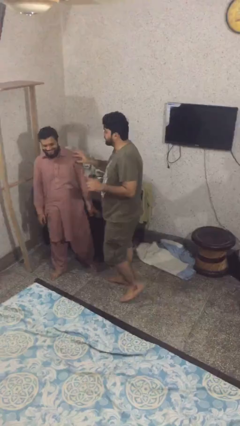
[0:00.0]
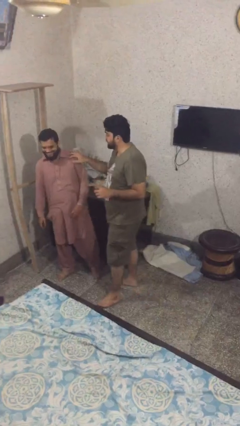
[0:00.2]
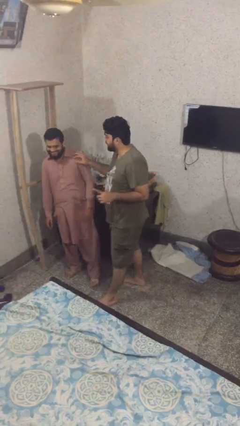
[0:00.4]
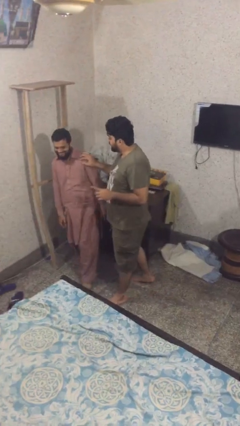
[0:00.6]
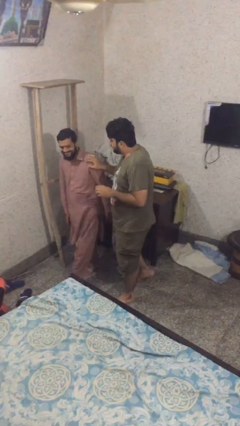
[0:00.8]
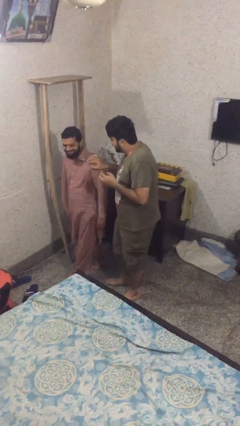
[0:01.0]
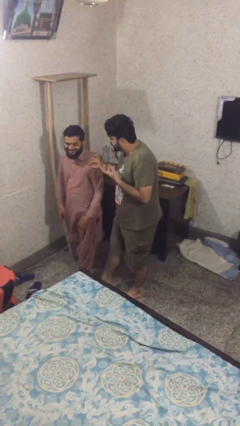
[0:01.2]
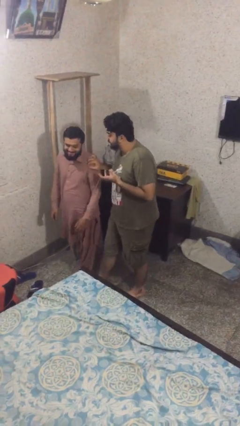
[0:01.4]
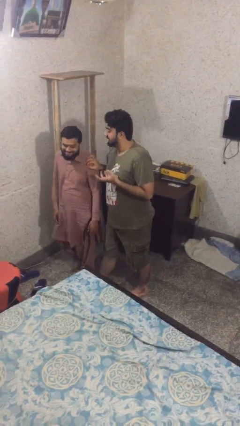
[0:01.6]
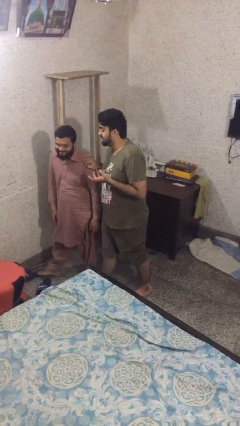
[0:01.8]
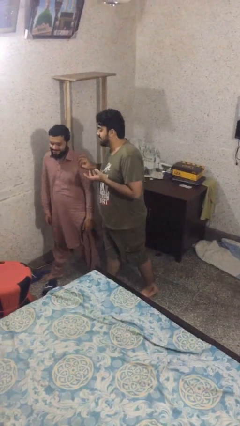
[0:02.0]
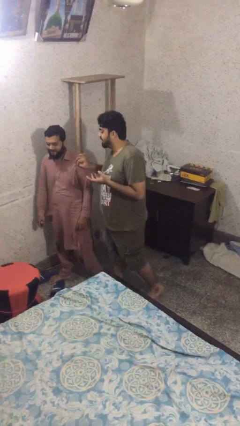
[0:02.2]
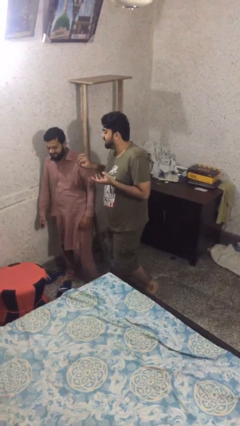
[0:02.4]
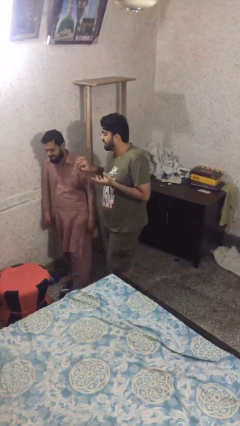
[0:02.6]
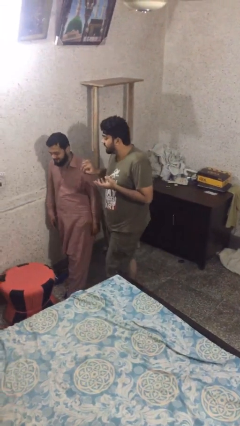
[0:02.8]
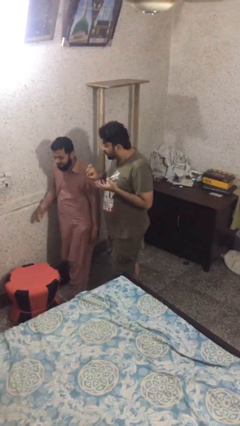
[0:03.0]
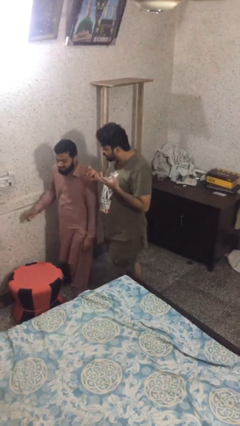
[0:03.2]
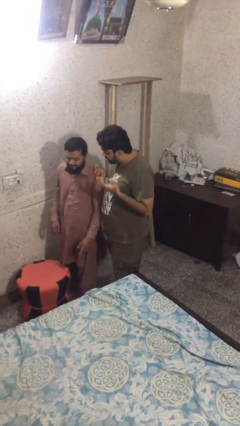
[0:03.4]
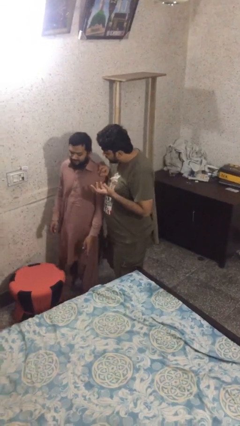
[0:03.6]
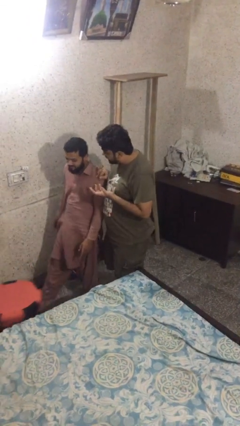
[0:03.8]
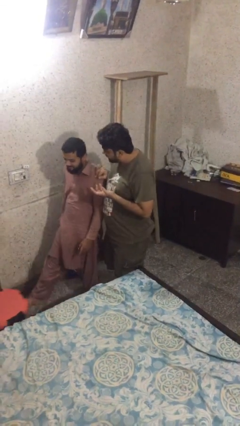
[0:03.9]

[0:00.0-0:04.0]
person talks to person

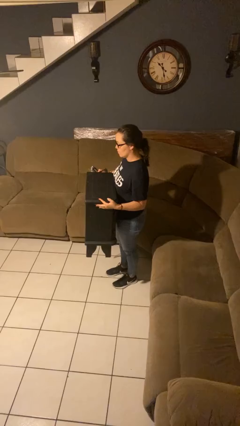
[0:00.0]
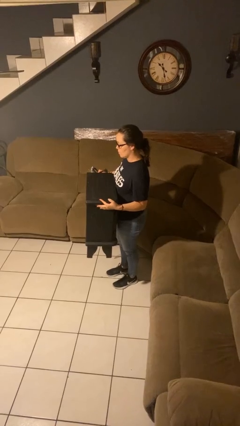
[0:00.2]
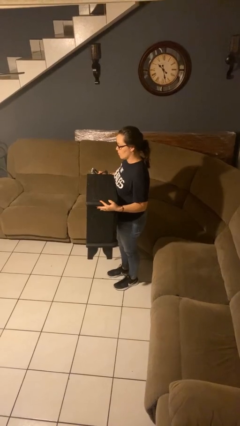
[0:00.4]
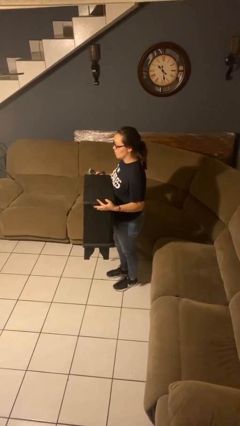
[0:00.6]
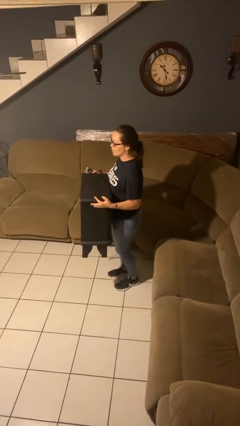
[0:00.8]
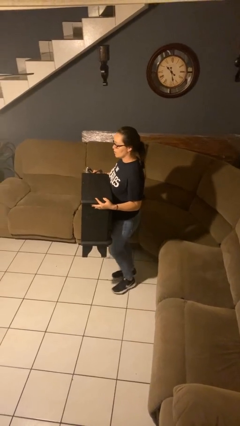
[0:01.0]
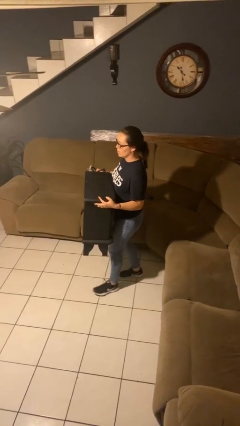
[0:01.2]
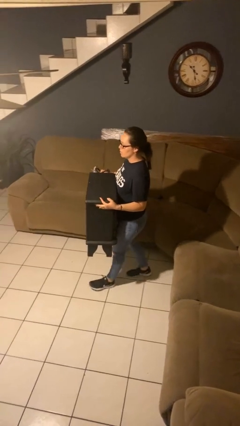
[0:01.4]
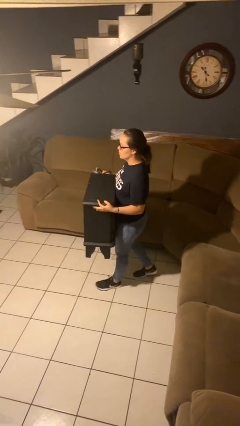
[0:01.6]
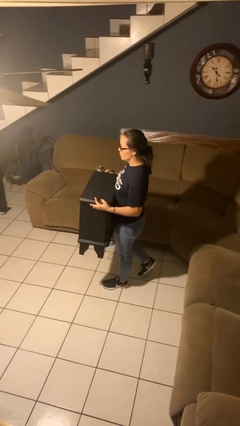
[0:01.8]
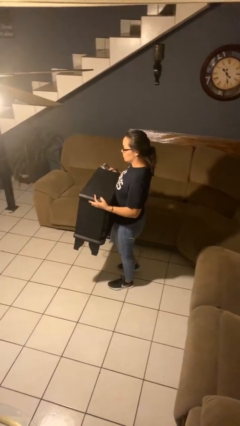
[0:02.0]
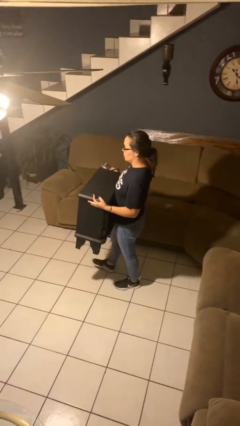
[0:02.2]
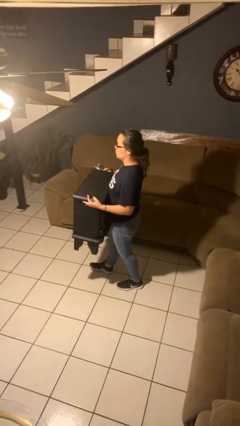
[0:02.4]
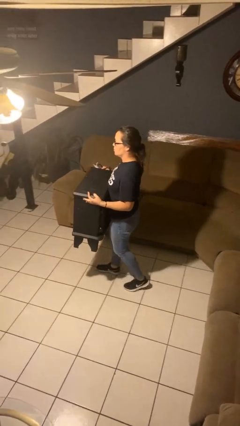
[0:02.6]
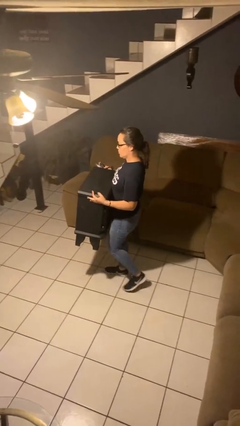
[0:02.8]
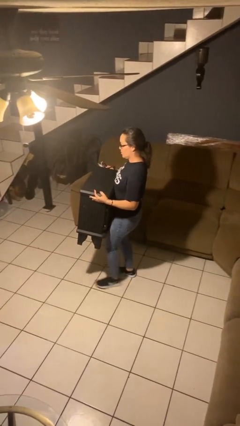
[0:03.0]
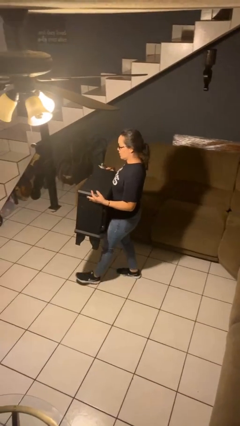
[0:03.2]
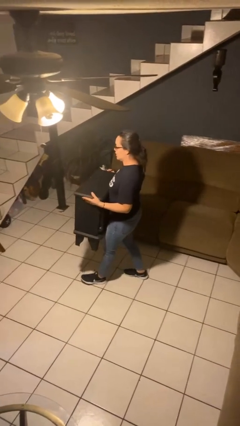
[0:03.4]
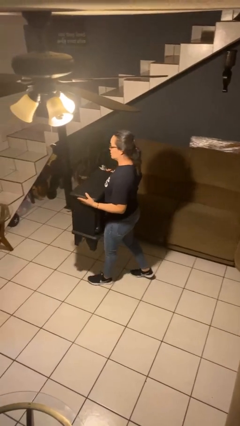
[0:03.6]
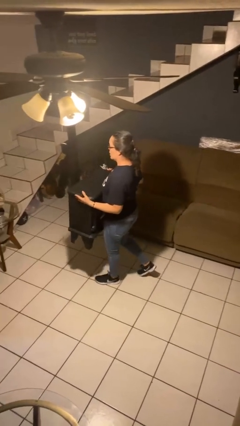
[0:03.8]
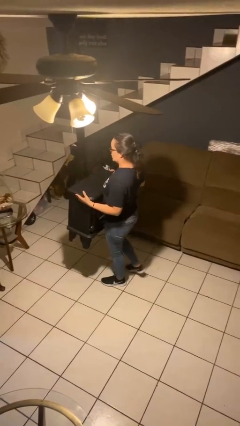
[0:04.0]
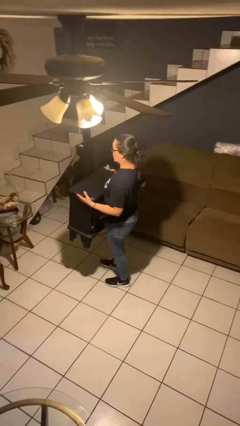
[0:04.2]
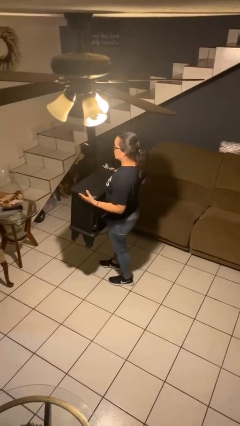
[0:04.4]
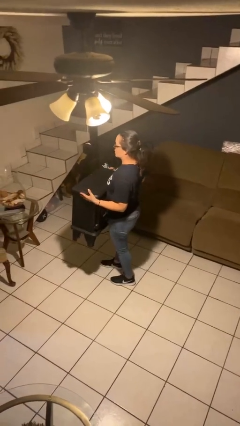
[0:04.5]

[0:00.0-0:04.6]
person carries furniture

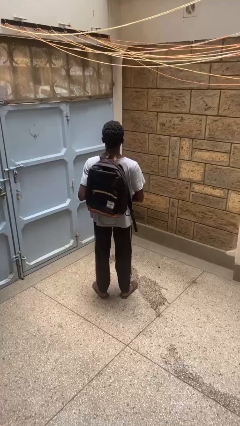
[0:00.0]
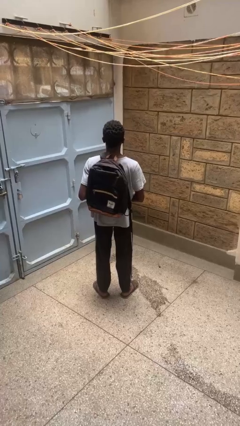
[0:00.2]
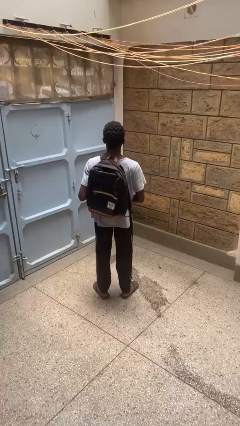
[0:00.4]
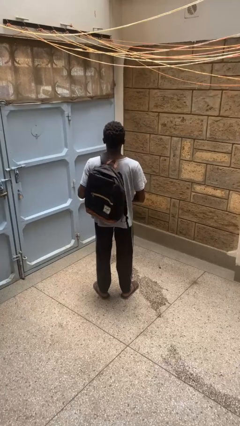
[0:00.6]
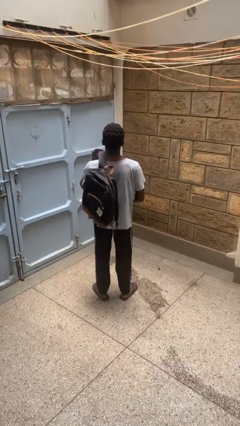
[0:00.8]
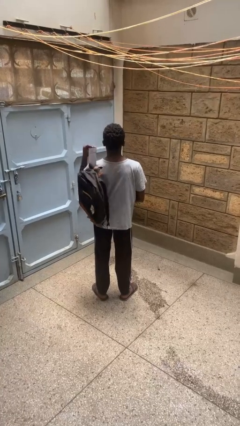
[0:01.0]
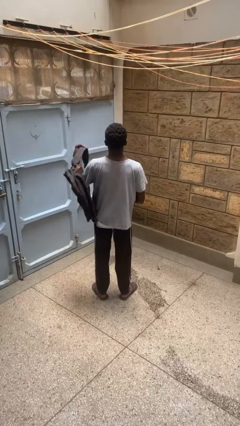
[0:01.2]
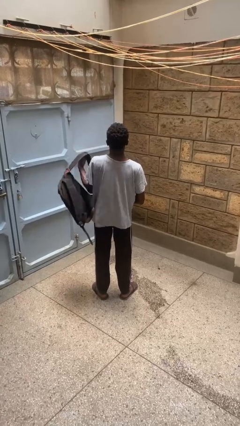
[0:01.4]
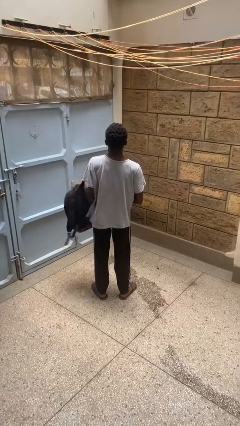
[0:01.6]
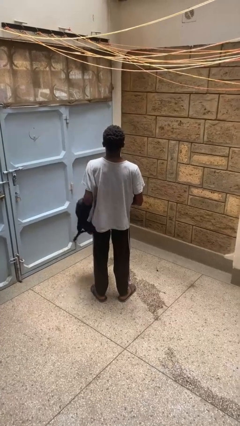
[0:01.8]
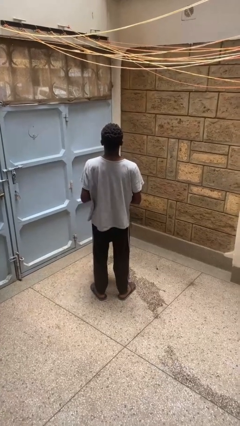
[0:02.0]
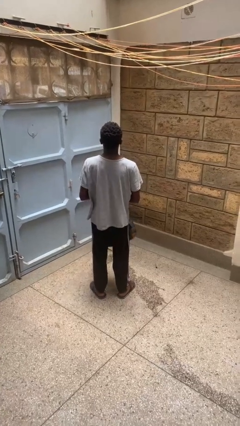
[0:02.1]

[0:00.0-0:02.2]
person takes off backpack

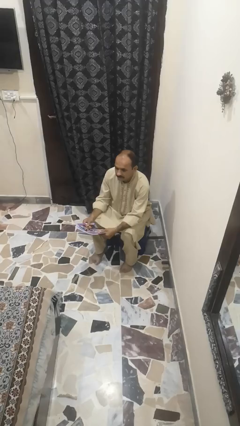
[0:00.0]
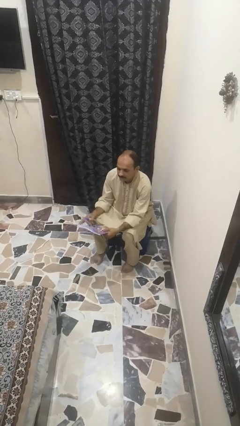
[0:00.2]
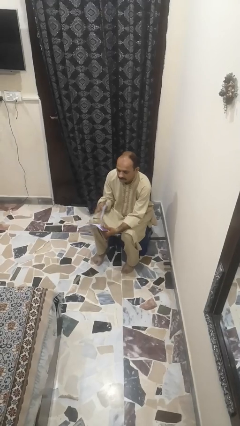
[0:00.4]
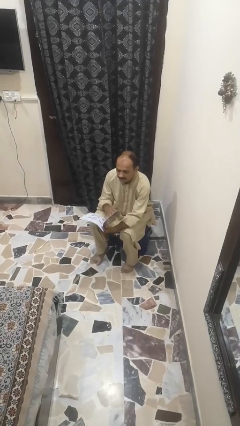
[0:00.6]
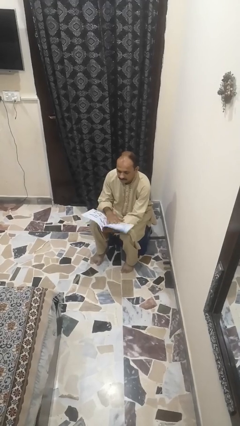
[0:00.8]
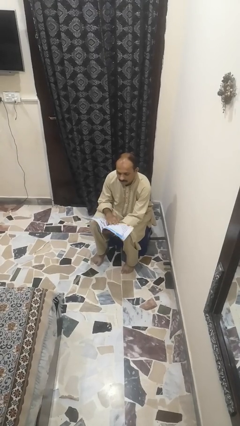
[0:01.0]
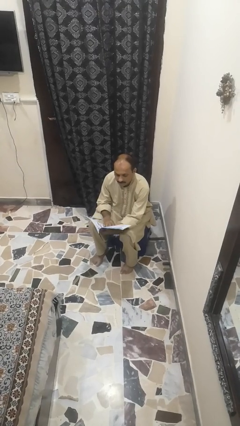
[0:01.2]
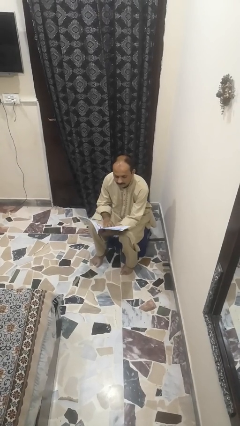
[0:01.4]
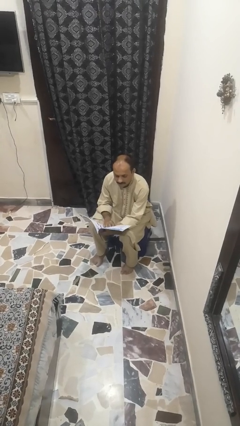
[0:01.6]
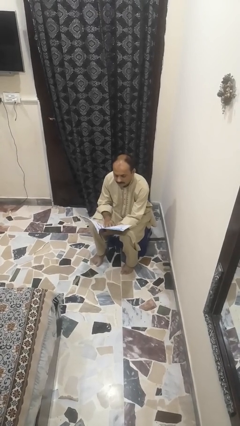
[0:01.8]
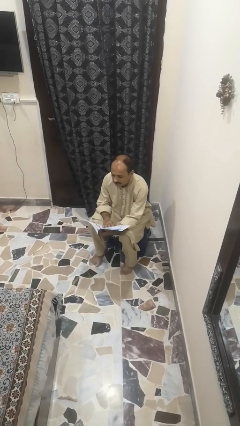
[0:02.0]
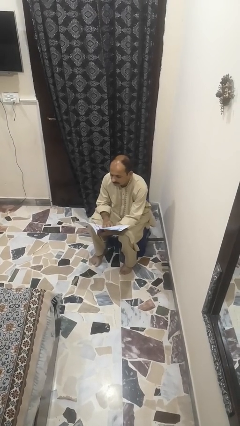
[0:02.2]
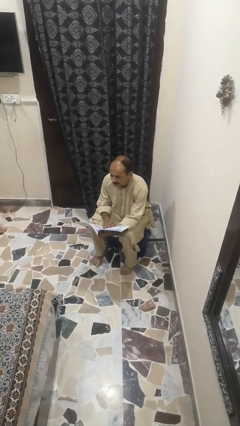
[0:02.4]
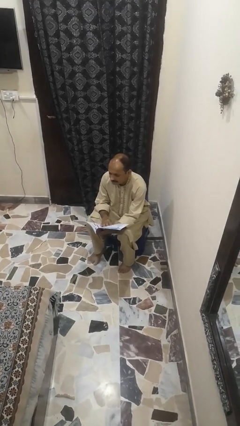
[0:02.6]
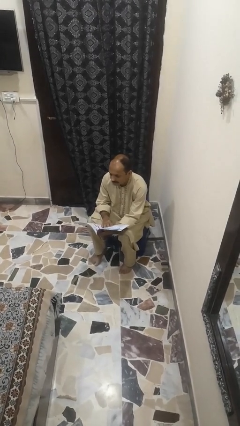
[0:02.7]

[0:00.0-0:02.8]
person reads magazine

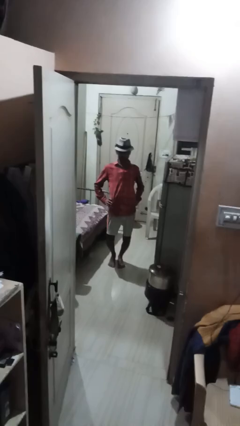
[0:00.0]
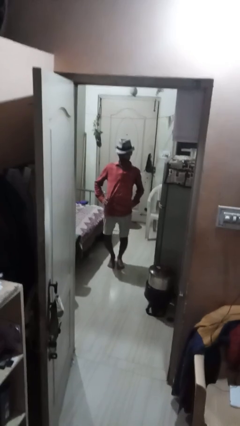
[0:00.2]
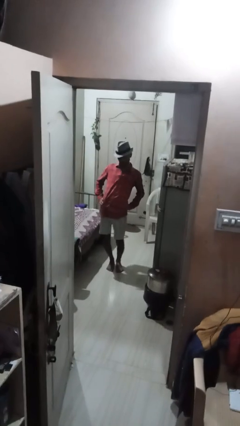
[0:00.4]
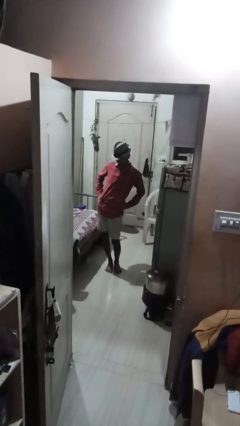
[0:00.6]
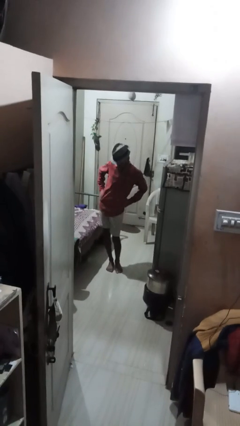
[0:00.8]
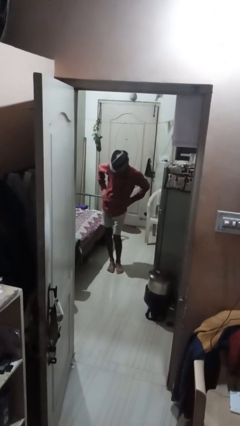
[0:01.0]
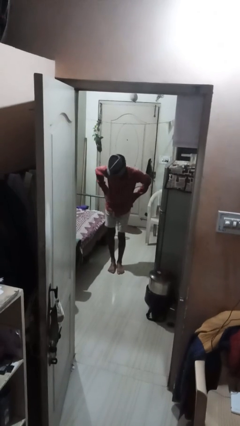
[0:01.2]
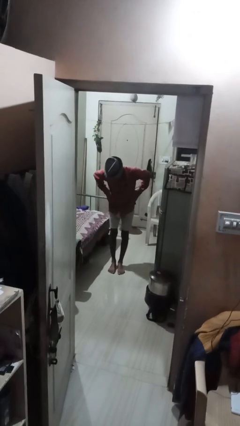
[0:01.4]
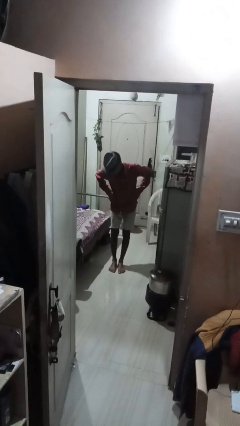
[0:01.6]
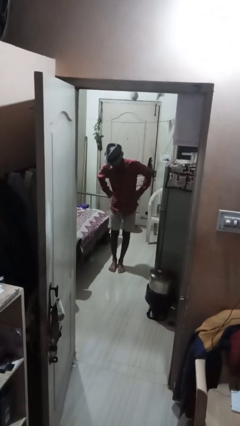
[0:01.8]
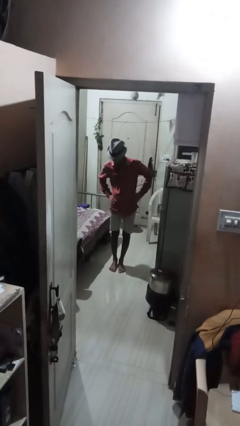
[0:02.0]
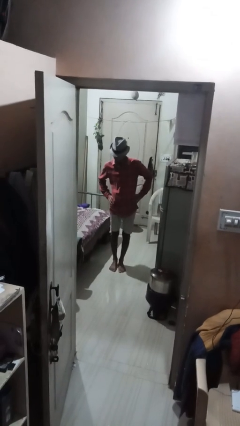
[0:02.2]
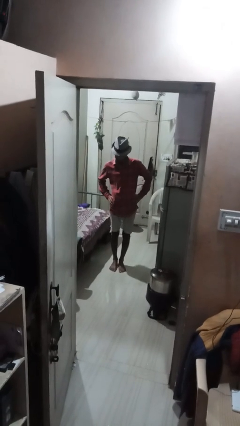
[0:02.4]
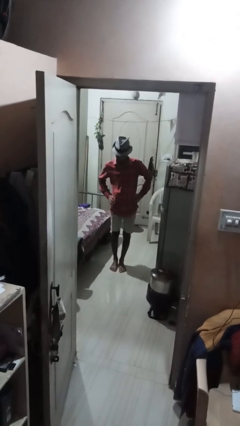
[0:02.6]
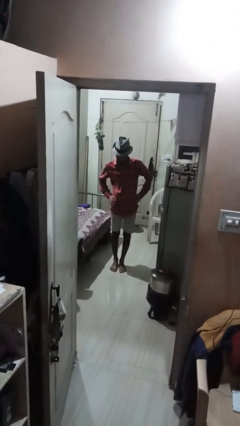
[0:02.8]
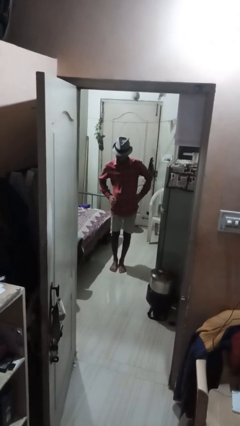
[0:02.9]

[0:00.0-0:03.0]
person wiggles hips

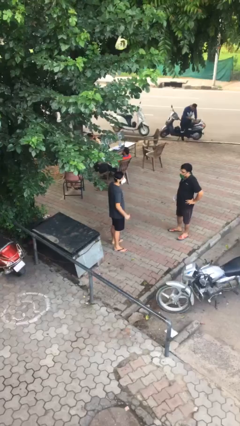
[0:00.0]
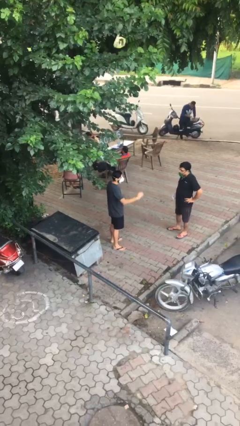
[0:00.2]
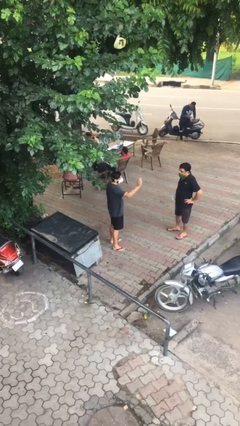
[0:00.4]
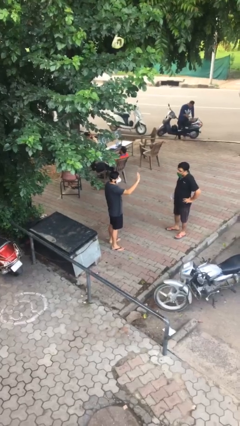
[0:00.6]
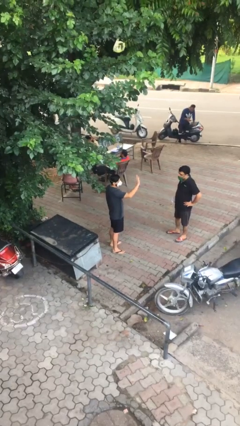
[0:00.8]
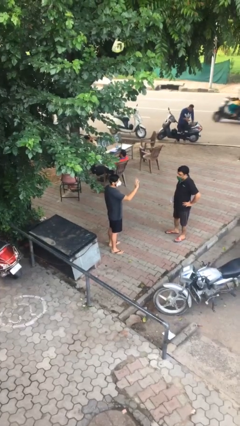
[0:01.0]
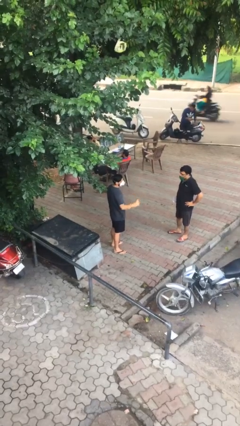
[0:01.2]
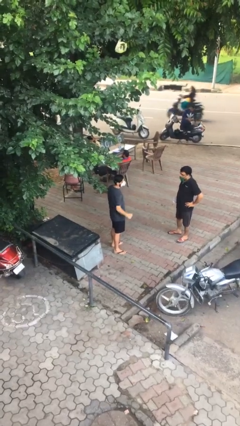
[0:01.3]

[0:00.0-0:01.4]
person waves at person
